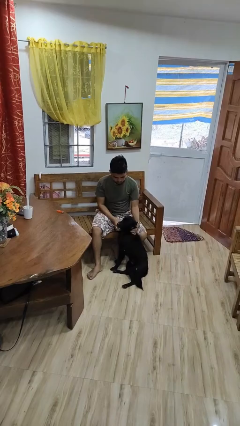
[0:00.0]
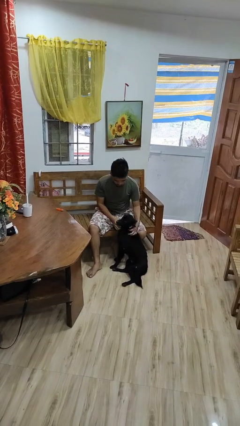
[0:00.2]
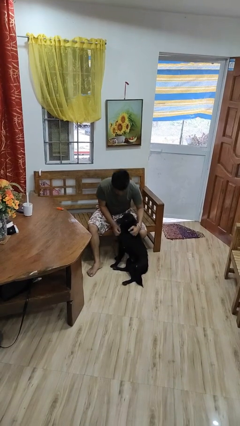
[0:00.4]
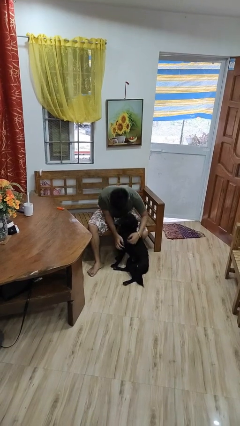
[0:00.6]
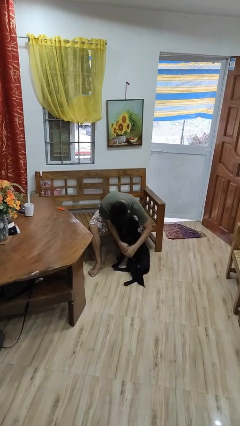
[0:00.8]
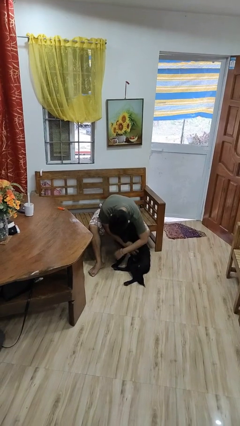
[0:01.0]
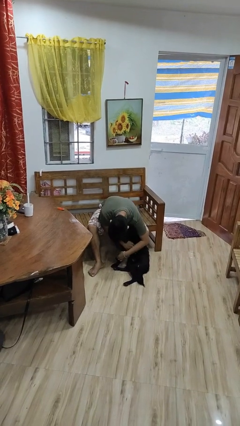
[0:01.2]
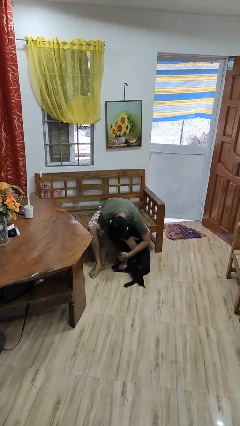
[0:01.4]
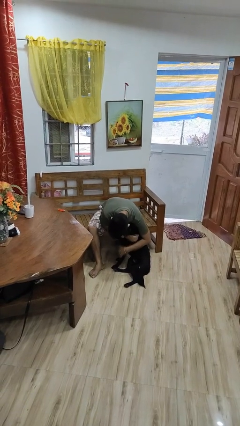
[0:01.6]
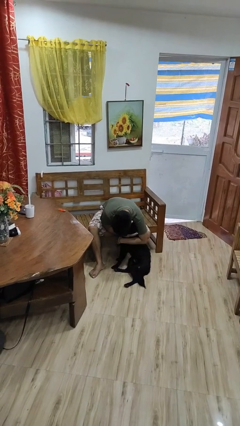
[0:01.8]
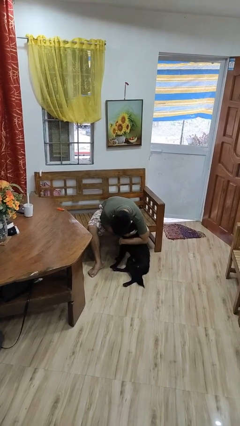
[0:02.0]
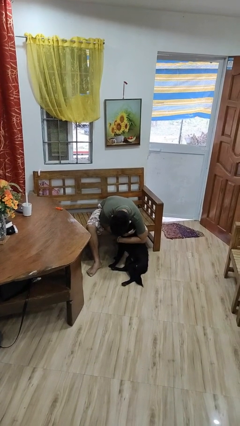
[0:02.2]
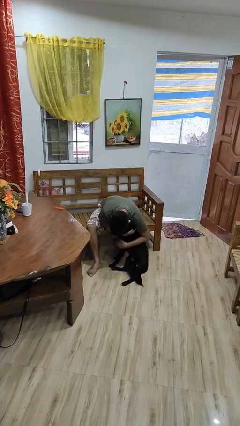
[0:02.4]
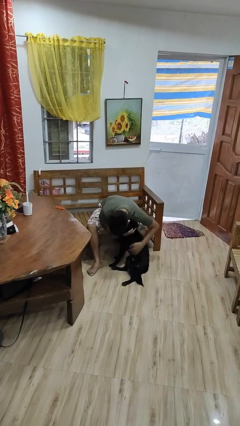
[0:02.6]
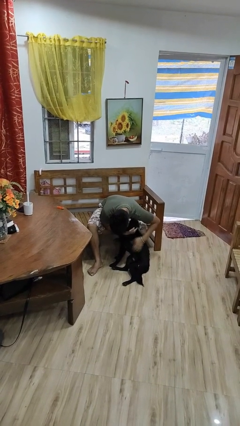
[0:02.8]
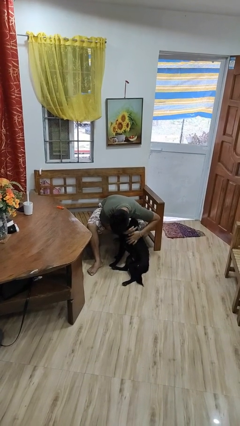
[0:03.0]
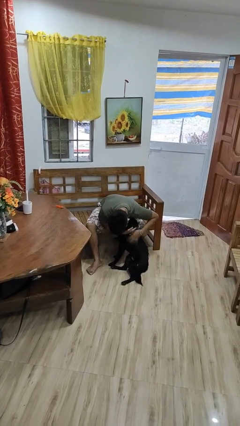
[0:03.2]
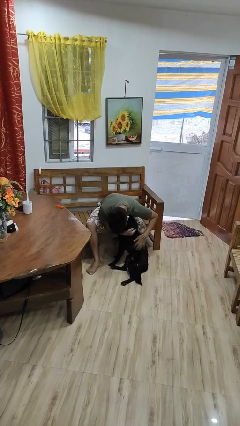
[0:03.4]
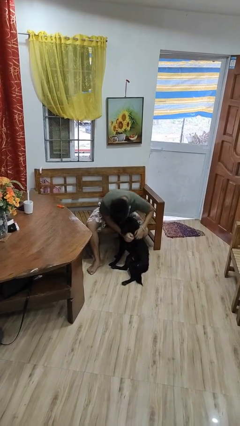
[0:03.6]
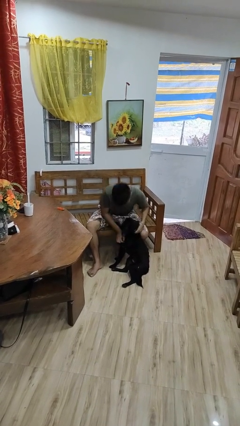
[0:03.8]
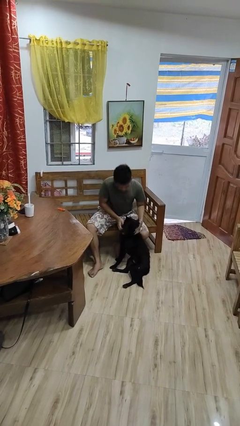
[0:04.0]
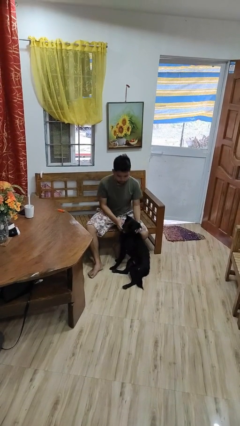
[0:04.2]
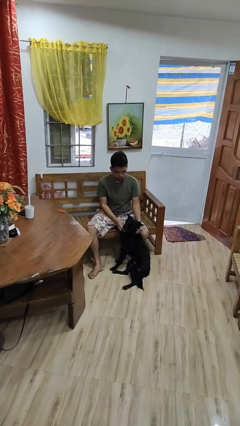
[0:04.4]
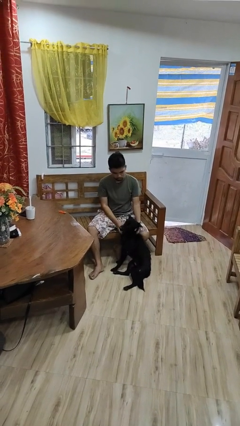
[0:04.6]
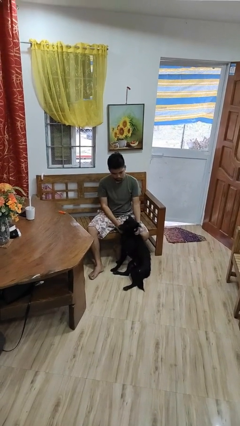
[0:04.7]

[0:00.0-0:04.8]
person hugs dog

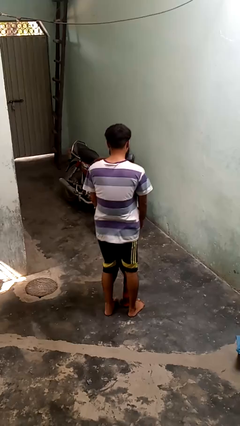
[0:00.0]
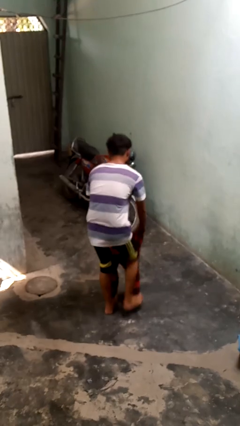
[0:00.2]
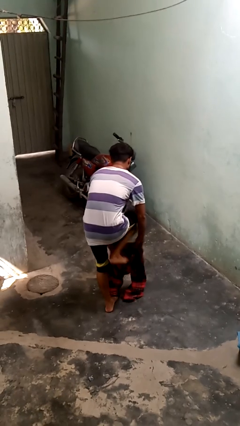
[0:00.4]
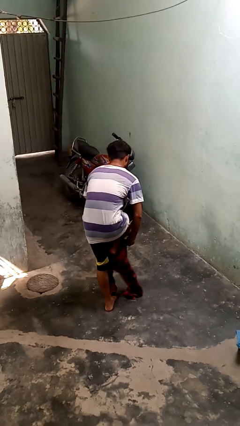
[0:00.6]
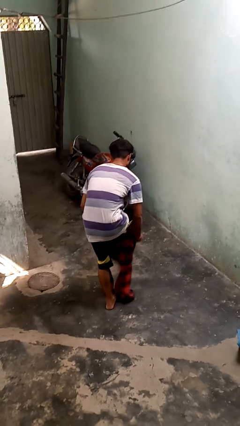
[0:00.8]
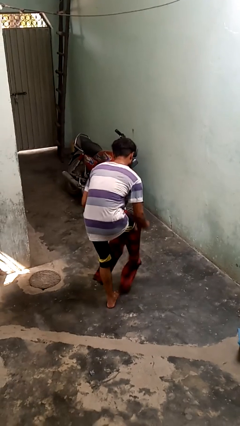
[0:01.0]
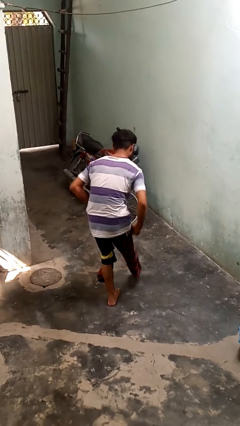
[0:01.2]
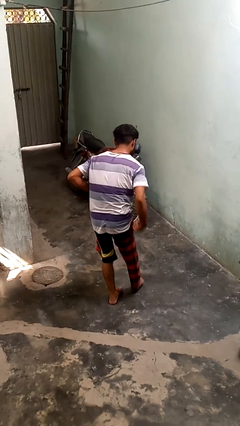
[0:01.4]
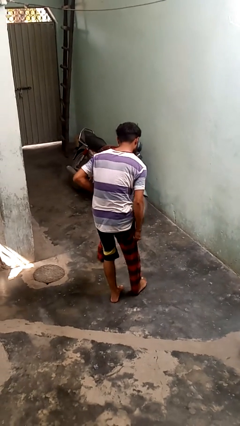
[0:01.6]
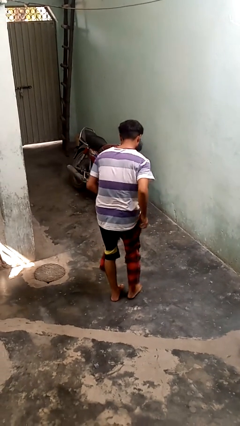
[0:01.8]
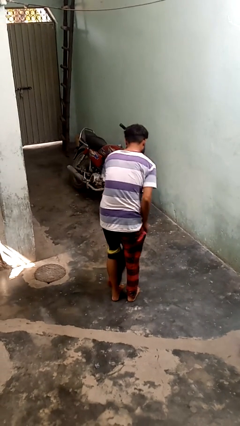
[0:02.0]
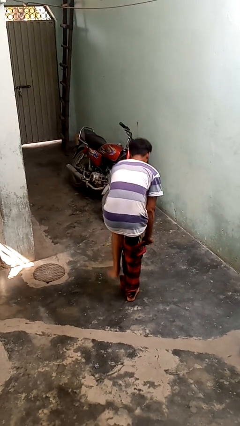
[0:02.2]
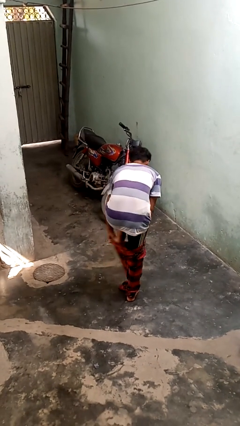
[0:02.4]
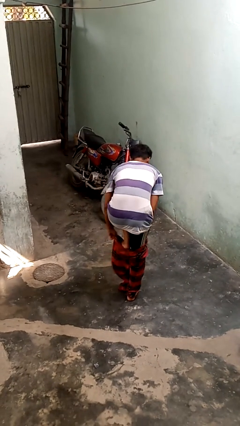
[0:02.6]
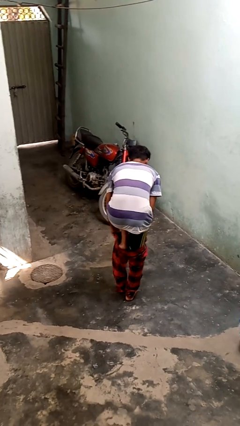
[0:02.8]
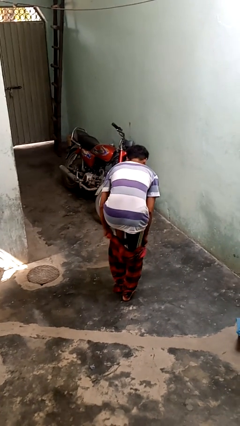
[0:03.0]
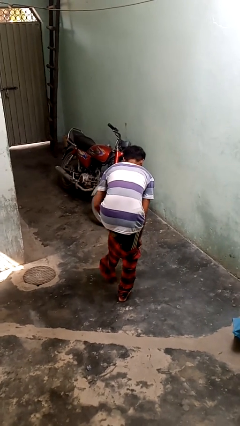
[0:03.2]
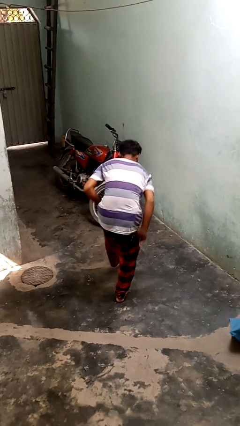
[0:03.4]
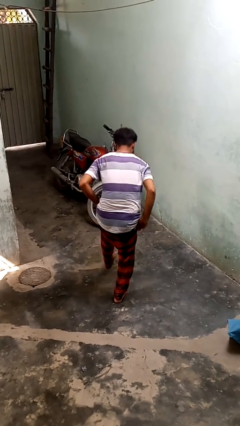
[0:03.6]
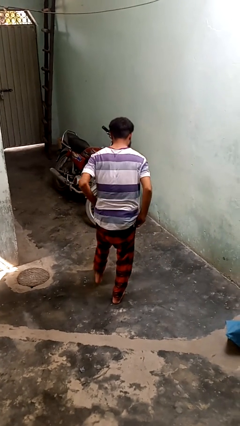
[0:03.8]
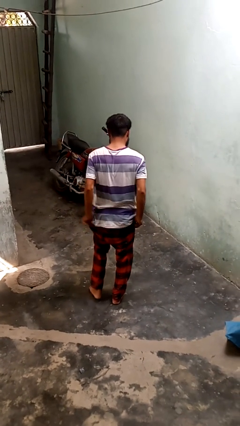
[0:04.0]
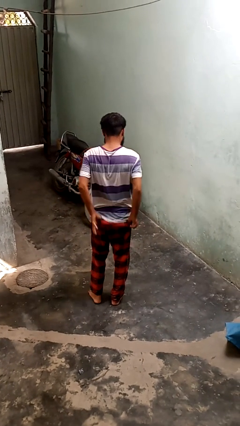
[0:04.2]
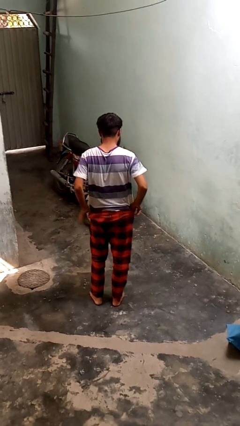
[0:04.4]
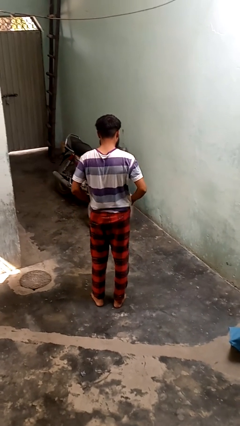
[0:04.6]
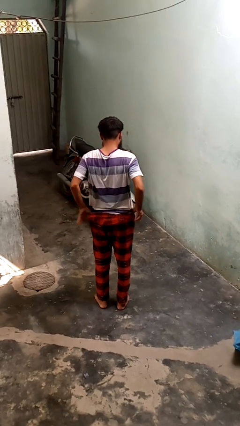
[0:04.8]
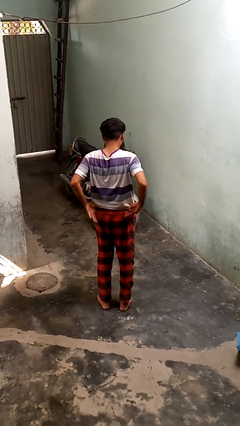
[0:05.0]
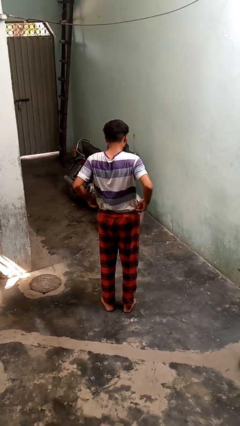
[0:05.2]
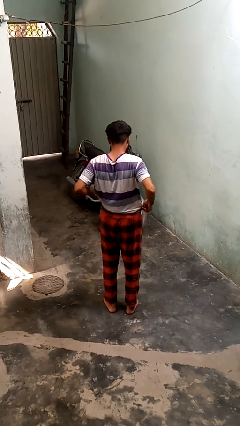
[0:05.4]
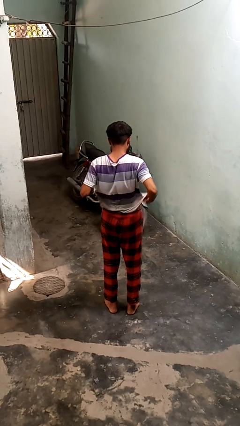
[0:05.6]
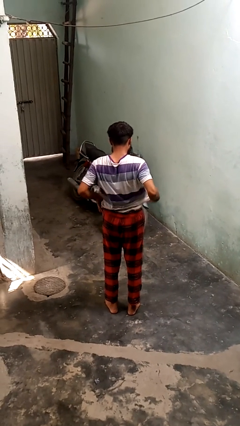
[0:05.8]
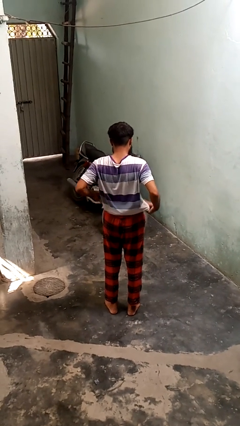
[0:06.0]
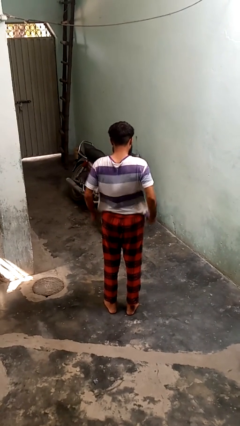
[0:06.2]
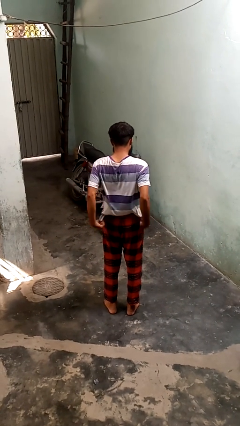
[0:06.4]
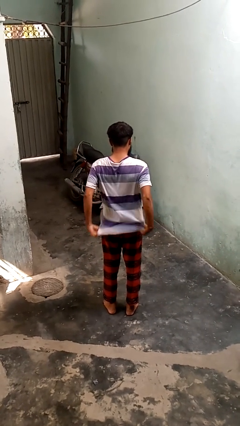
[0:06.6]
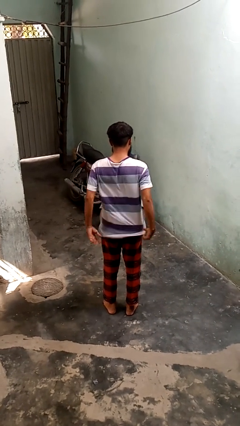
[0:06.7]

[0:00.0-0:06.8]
person puts on pants

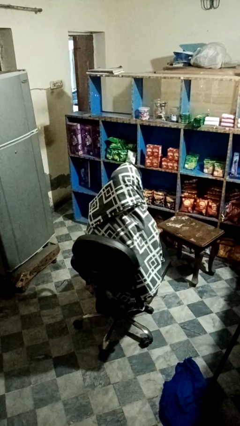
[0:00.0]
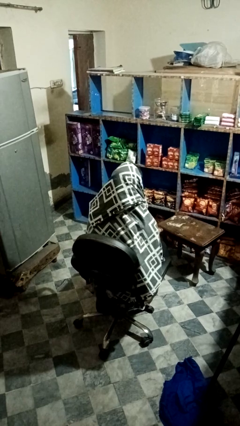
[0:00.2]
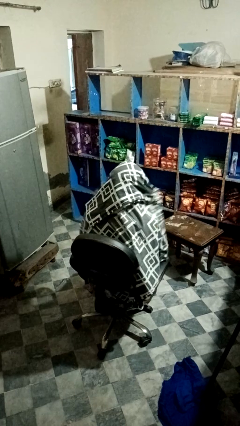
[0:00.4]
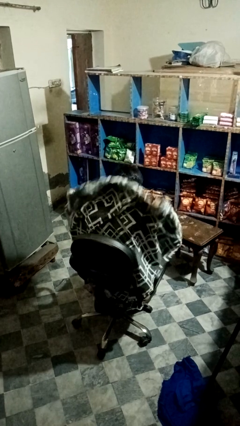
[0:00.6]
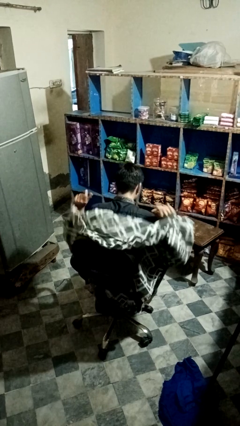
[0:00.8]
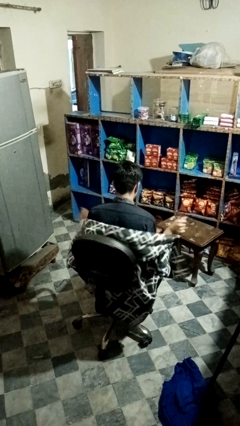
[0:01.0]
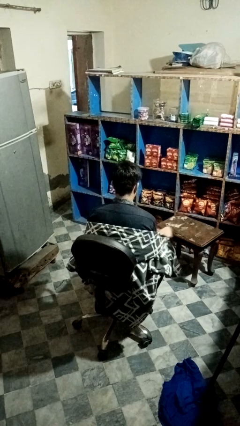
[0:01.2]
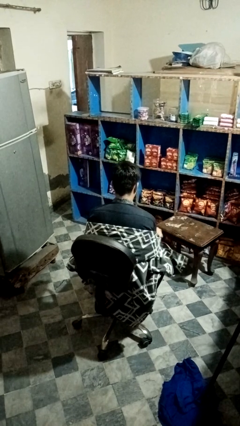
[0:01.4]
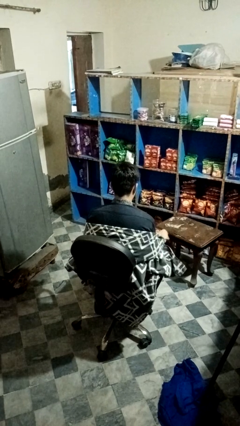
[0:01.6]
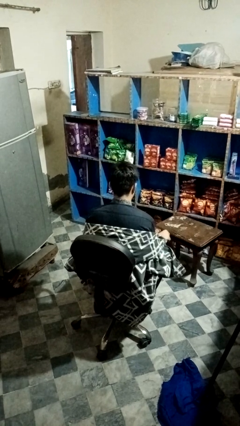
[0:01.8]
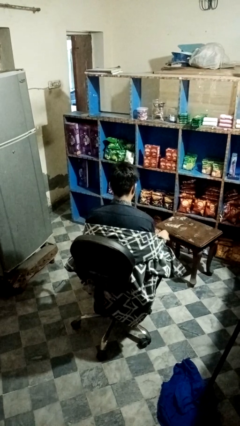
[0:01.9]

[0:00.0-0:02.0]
person uncovers with blanket

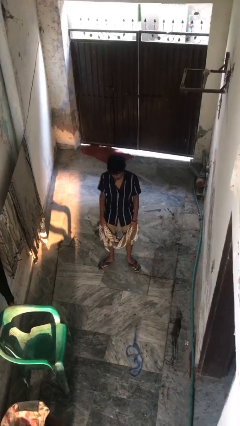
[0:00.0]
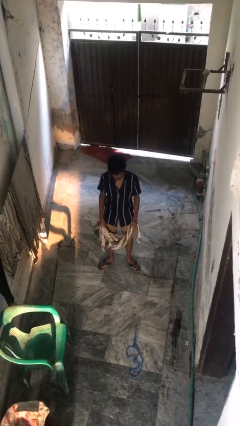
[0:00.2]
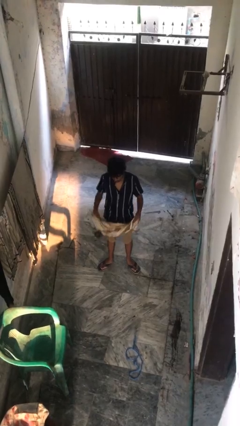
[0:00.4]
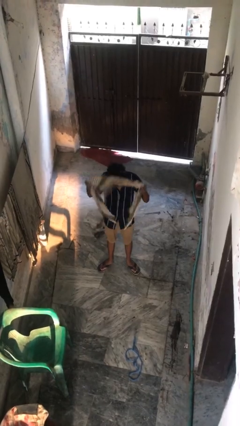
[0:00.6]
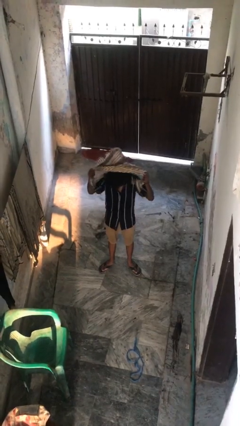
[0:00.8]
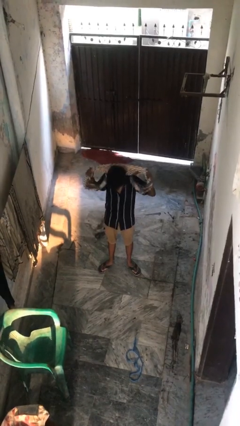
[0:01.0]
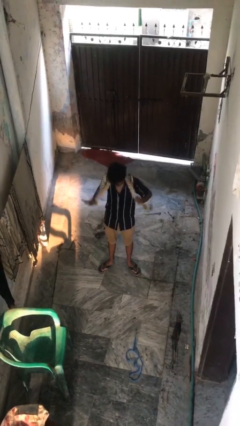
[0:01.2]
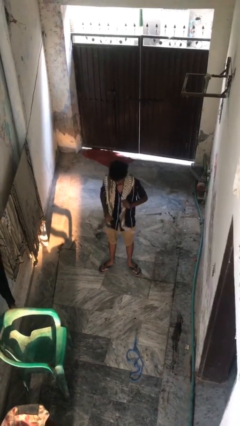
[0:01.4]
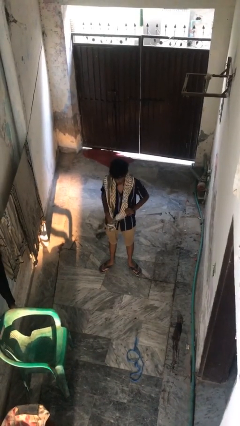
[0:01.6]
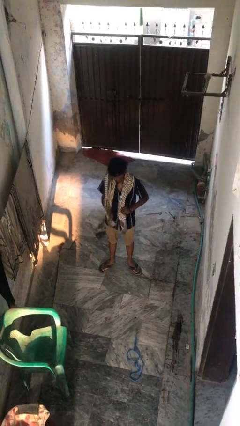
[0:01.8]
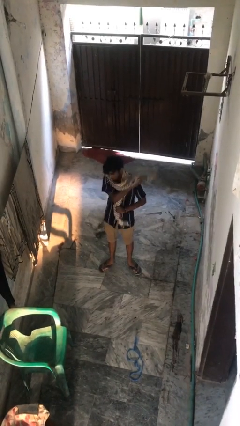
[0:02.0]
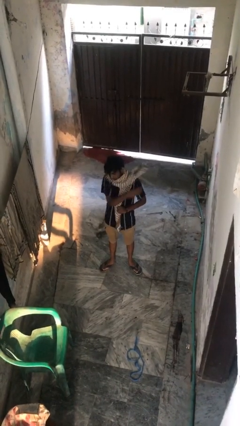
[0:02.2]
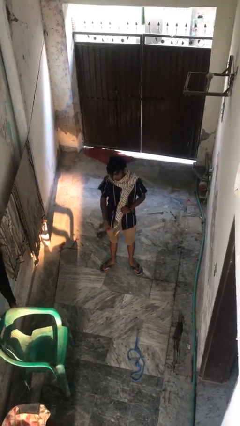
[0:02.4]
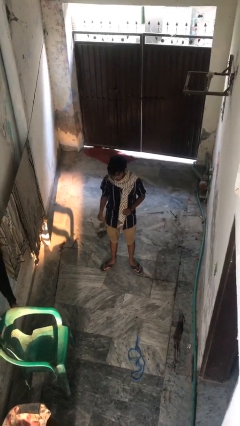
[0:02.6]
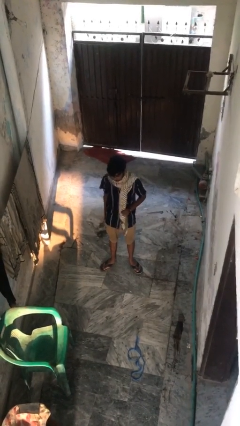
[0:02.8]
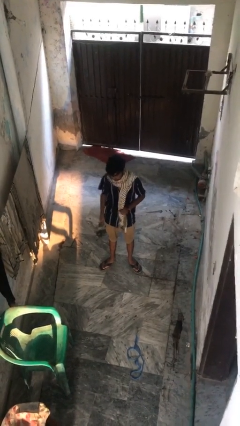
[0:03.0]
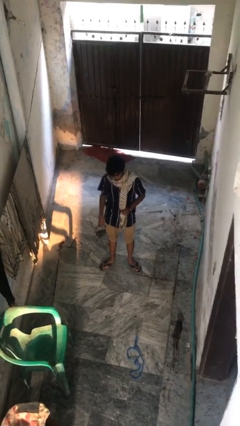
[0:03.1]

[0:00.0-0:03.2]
person puts on scarf

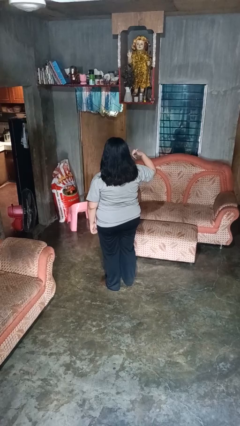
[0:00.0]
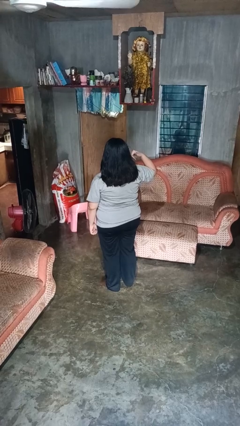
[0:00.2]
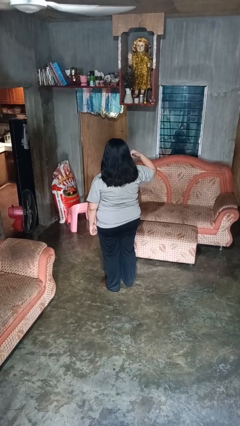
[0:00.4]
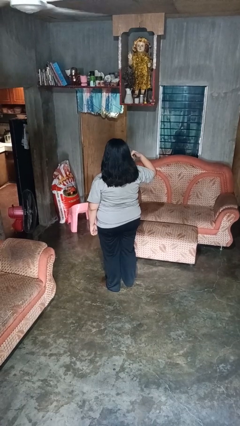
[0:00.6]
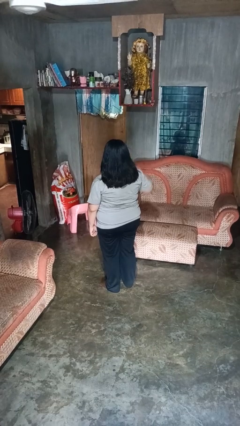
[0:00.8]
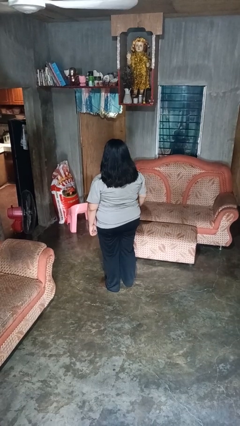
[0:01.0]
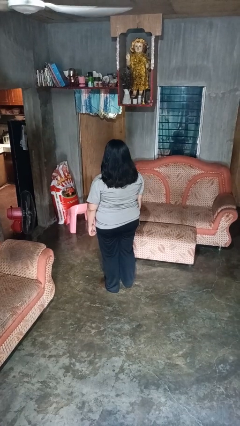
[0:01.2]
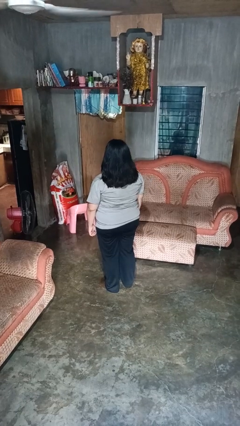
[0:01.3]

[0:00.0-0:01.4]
person gestures call me
